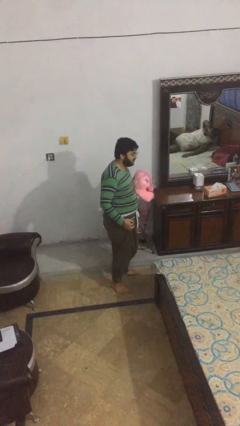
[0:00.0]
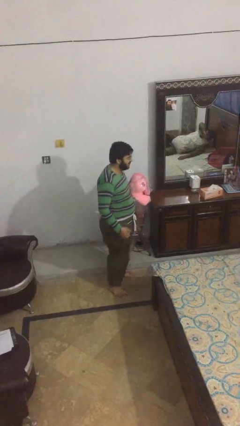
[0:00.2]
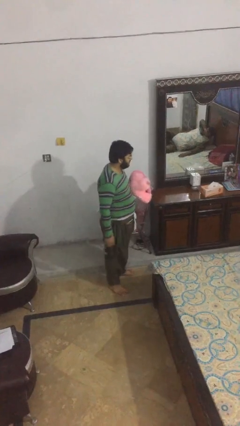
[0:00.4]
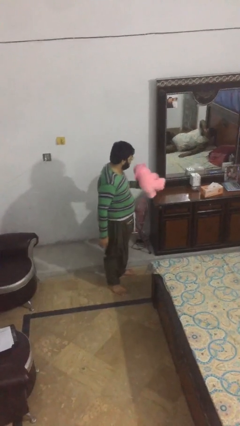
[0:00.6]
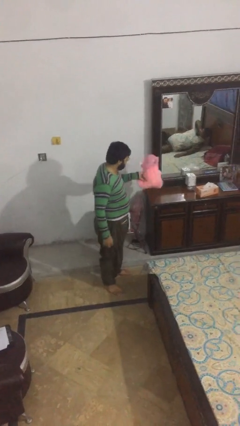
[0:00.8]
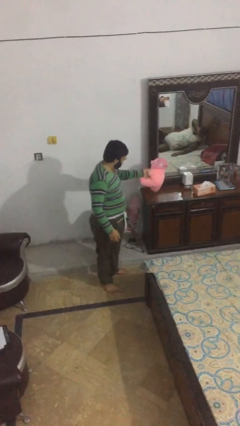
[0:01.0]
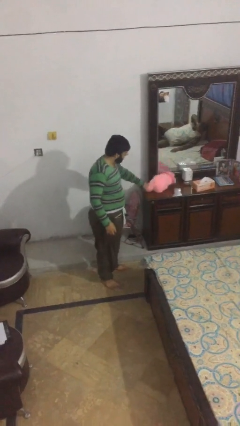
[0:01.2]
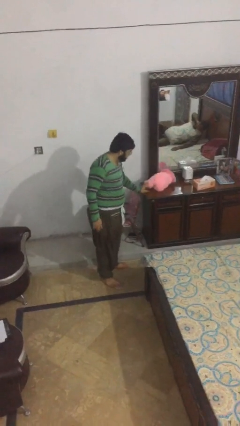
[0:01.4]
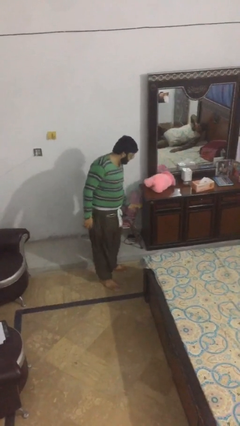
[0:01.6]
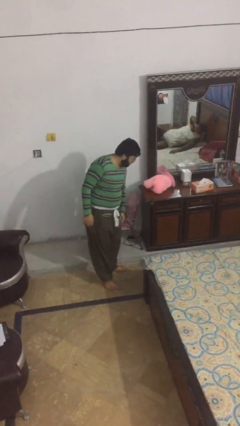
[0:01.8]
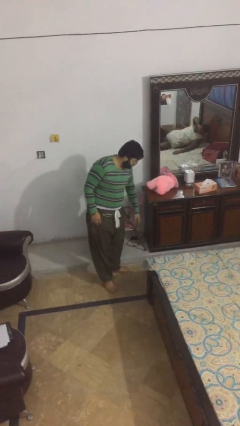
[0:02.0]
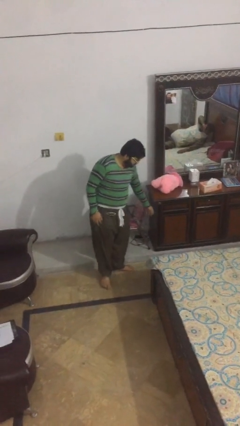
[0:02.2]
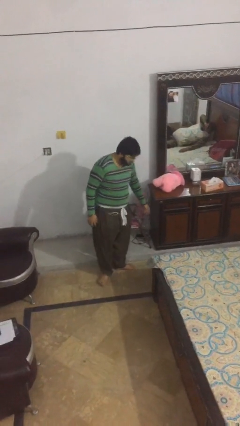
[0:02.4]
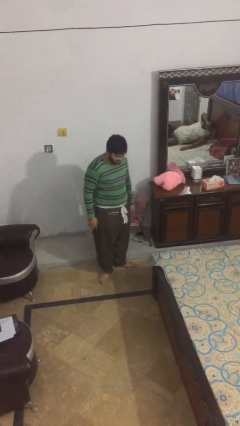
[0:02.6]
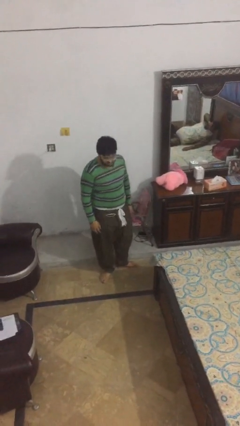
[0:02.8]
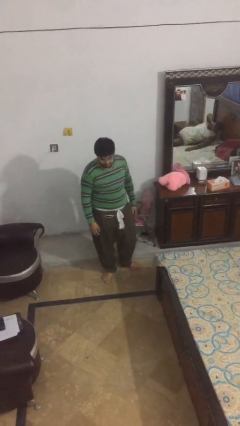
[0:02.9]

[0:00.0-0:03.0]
person puts down object on table

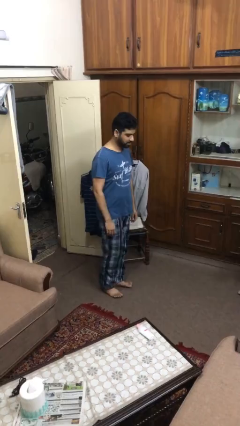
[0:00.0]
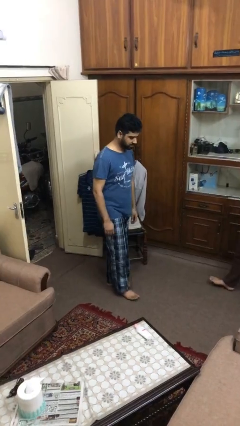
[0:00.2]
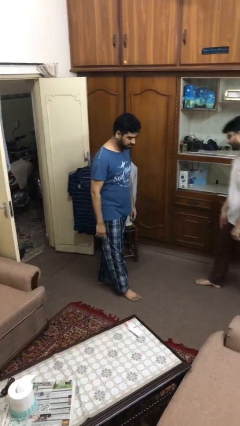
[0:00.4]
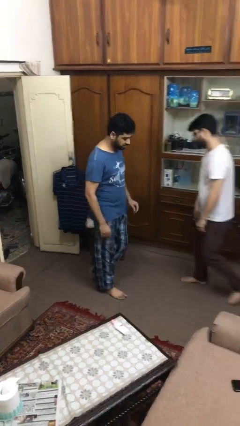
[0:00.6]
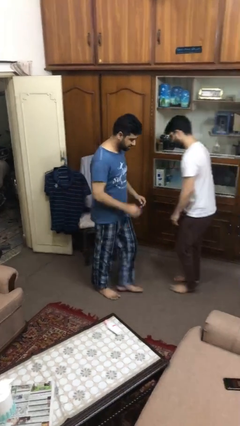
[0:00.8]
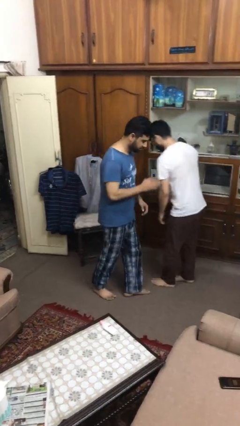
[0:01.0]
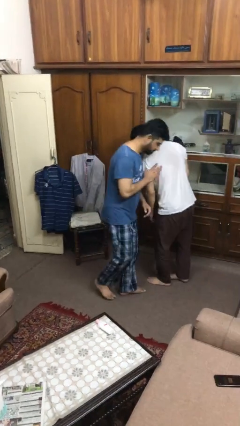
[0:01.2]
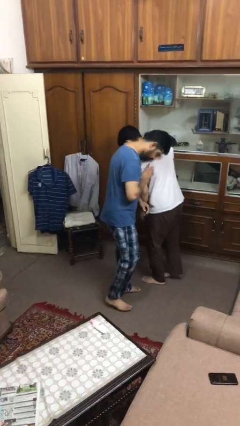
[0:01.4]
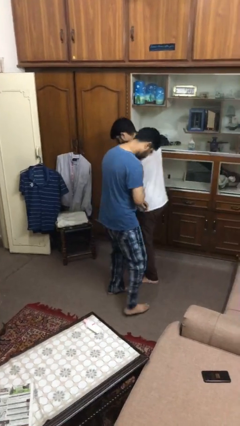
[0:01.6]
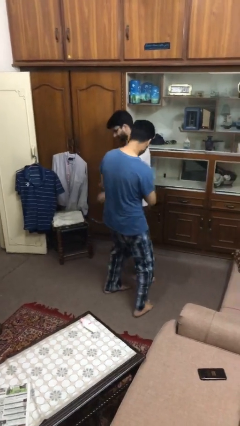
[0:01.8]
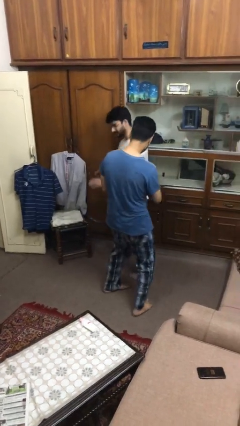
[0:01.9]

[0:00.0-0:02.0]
person bumps into person

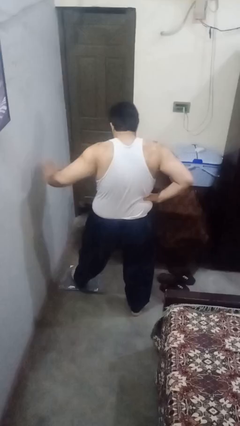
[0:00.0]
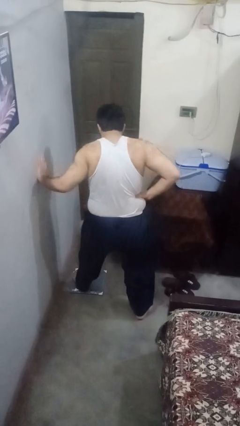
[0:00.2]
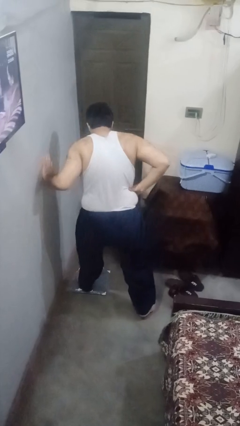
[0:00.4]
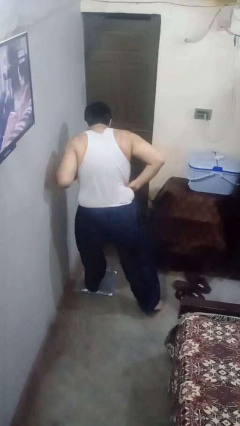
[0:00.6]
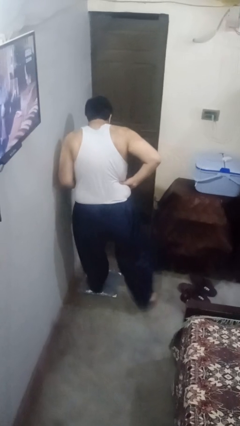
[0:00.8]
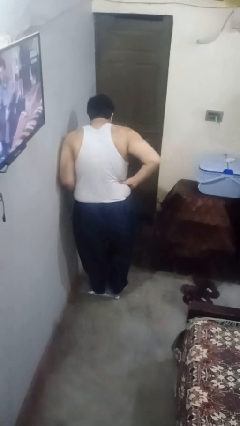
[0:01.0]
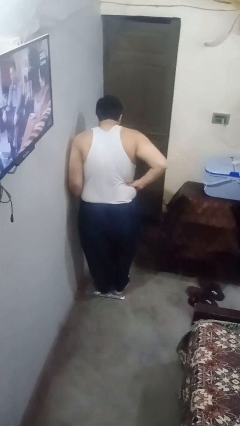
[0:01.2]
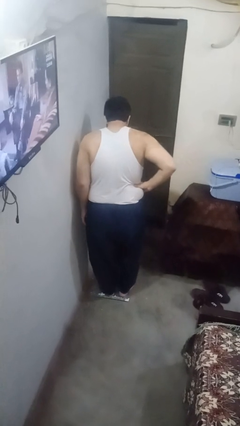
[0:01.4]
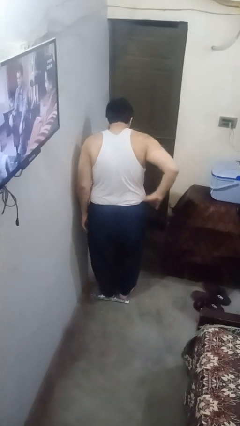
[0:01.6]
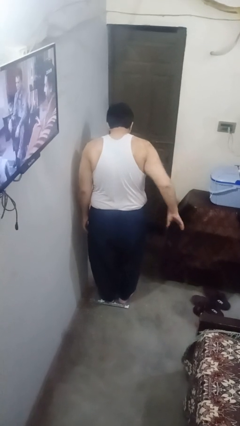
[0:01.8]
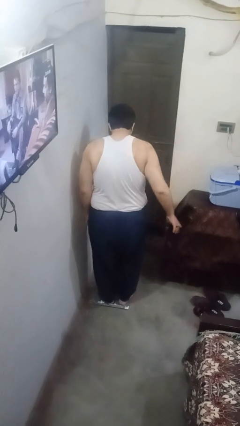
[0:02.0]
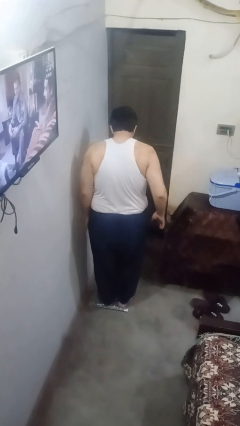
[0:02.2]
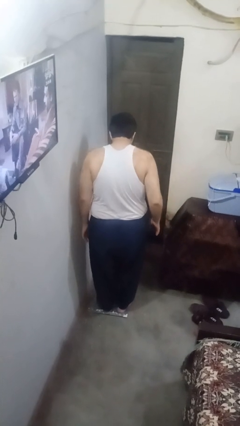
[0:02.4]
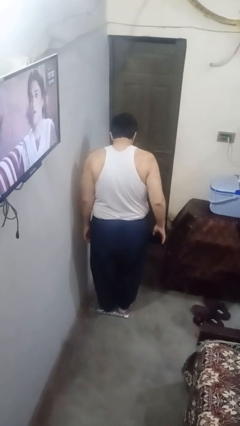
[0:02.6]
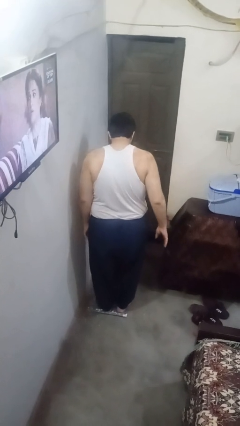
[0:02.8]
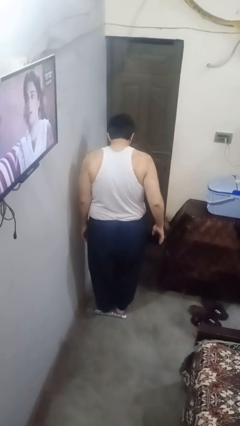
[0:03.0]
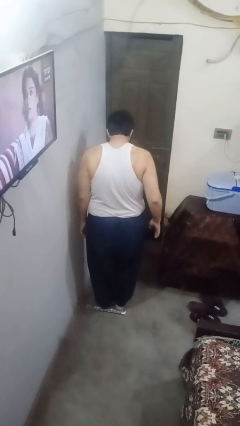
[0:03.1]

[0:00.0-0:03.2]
person uses bodyweight scale

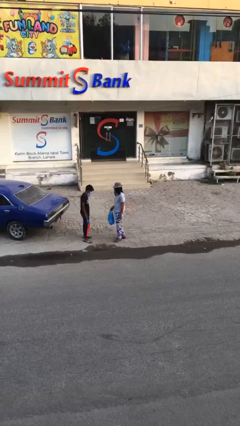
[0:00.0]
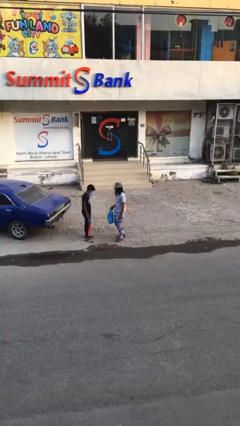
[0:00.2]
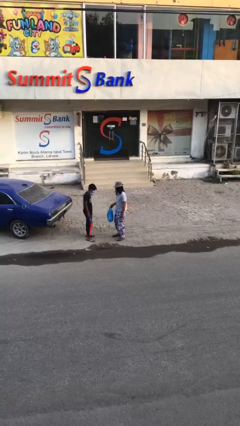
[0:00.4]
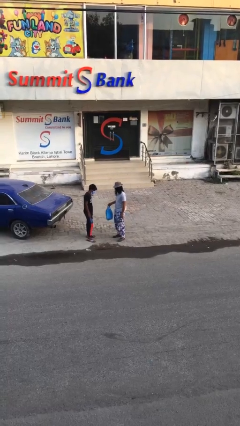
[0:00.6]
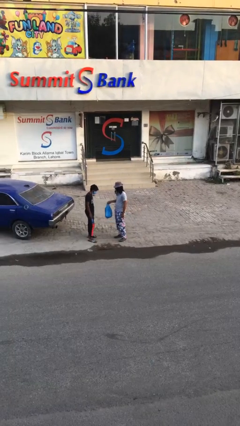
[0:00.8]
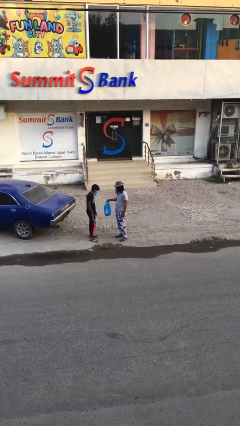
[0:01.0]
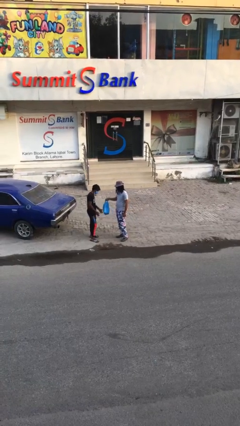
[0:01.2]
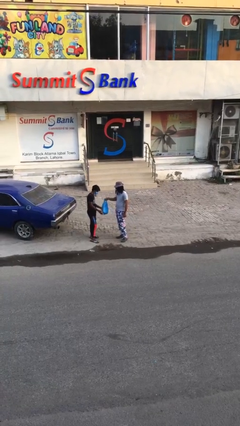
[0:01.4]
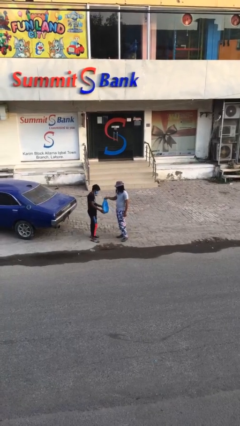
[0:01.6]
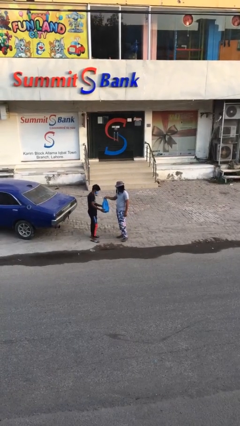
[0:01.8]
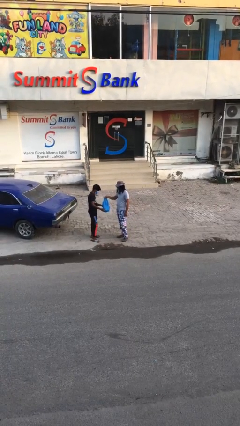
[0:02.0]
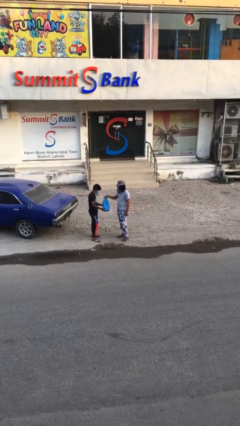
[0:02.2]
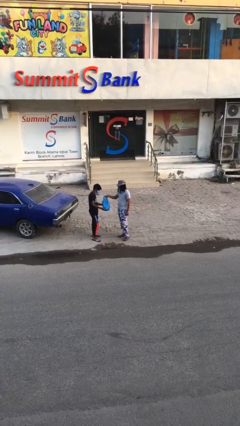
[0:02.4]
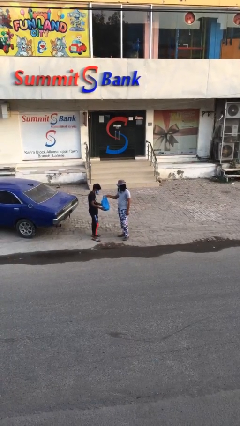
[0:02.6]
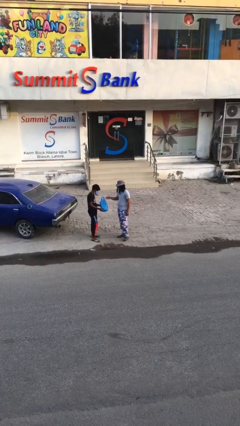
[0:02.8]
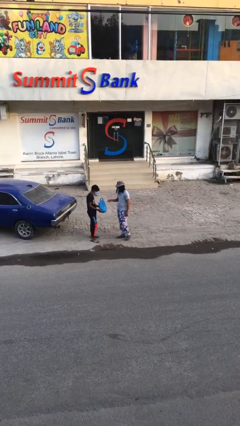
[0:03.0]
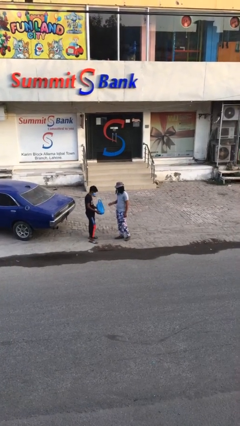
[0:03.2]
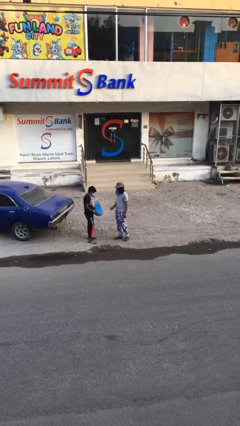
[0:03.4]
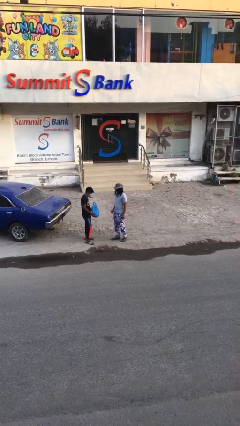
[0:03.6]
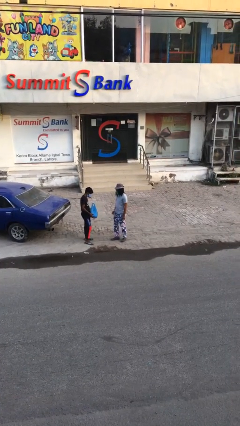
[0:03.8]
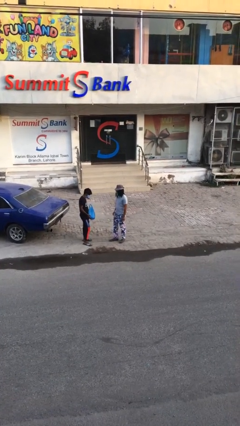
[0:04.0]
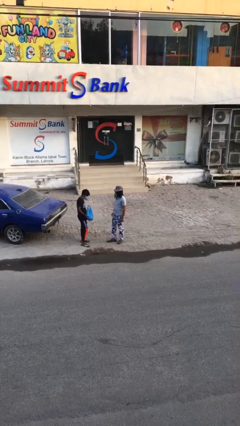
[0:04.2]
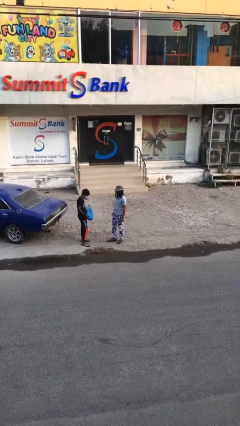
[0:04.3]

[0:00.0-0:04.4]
person transfers object to person

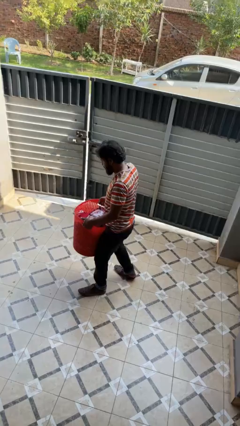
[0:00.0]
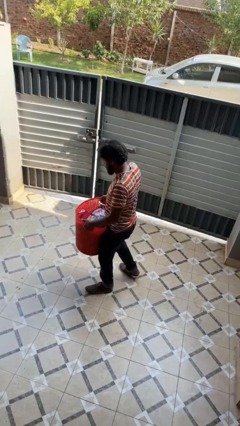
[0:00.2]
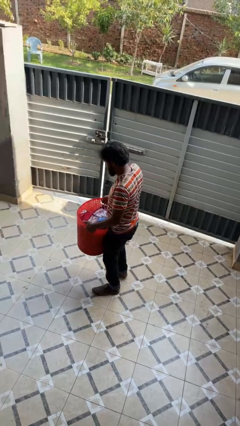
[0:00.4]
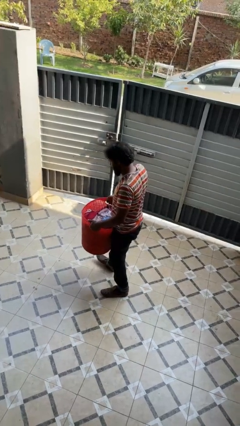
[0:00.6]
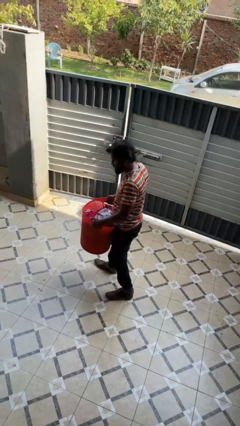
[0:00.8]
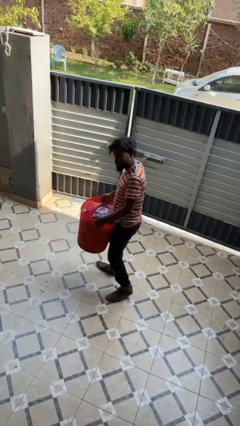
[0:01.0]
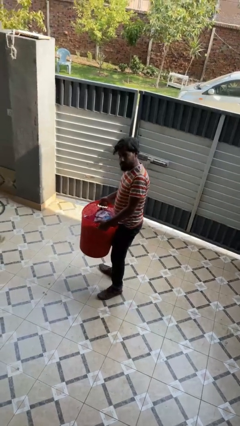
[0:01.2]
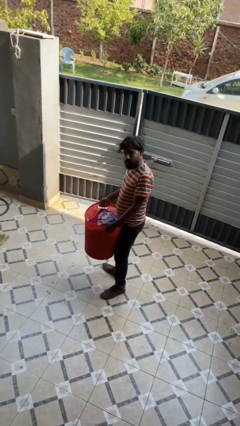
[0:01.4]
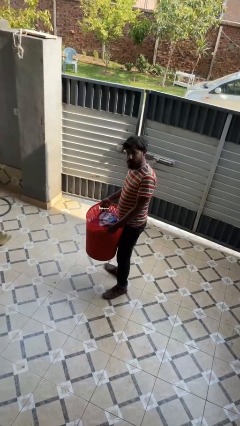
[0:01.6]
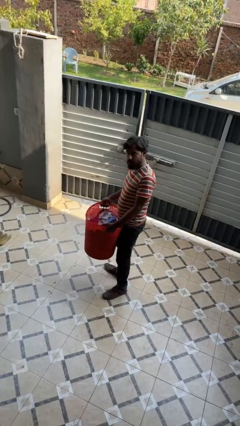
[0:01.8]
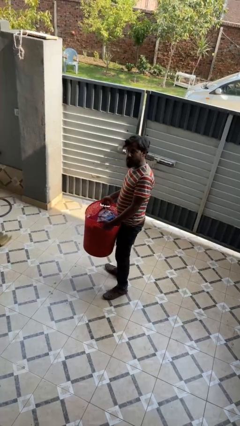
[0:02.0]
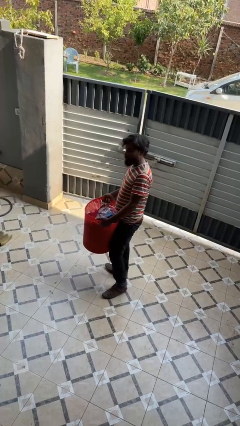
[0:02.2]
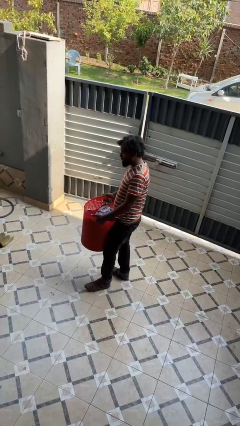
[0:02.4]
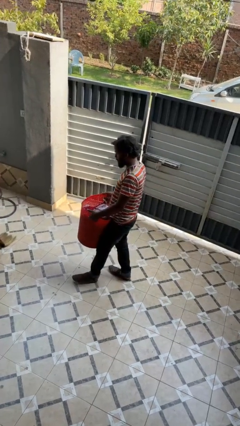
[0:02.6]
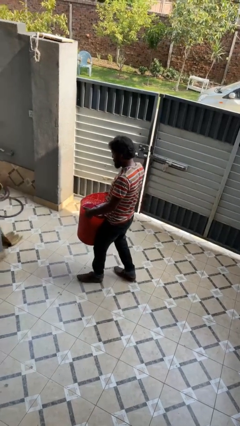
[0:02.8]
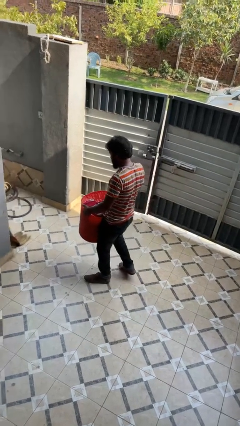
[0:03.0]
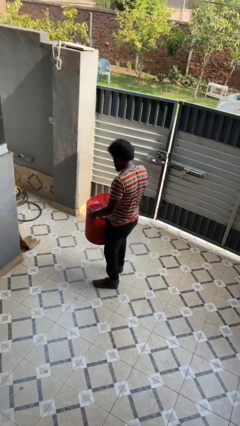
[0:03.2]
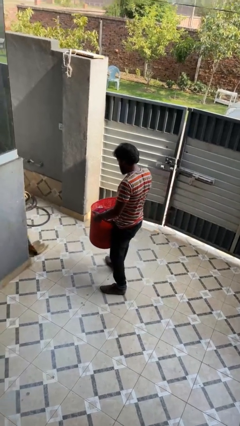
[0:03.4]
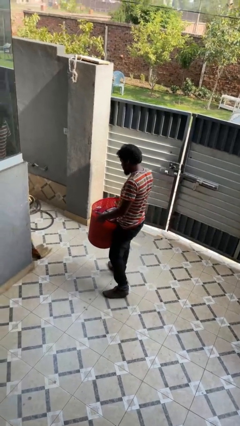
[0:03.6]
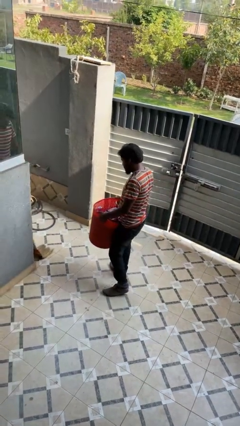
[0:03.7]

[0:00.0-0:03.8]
person carries laundry basket

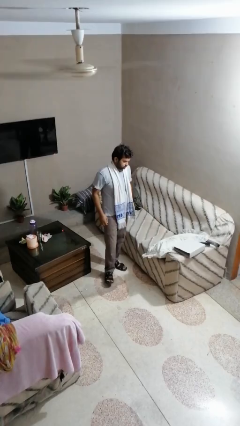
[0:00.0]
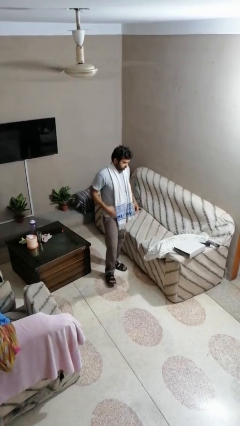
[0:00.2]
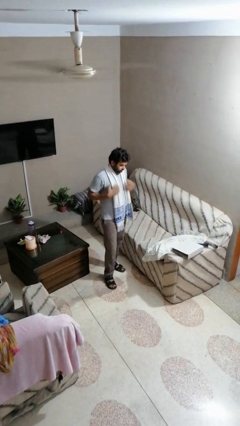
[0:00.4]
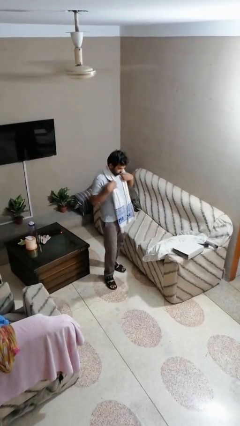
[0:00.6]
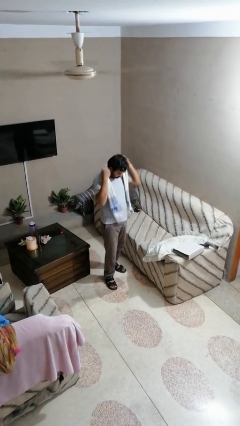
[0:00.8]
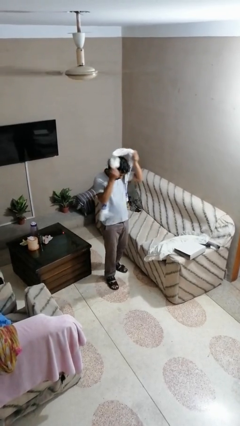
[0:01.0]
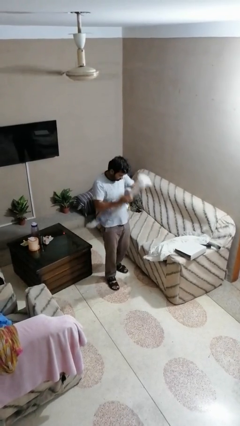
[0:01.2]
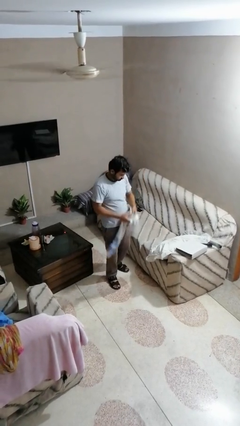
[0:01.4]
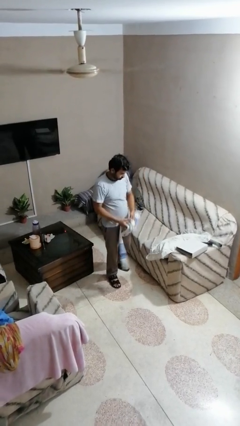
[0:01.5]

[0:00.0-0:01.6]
person takes off scarf
